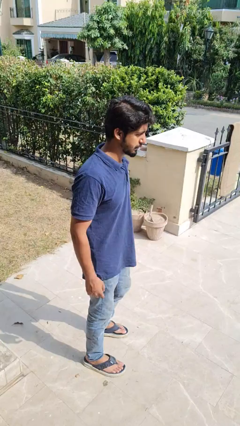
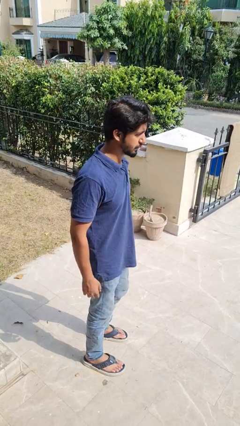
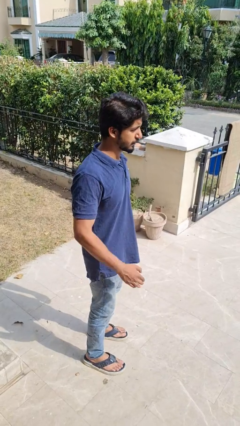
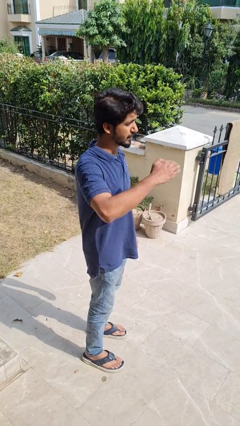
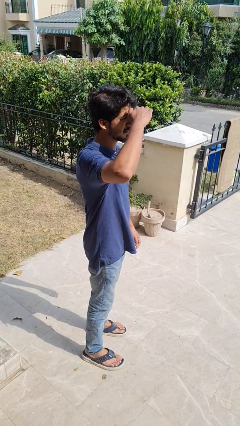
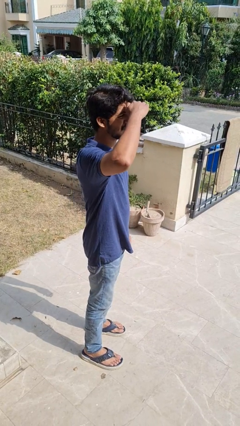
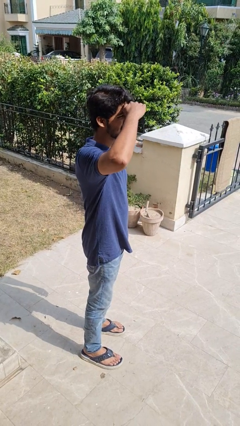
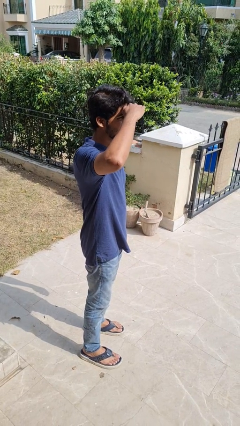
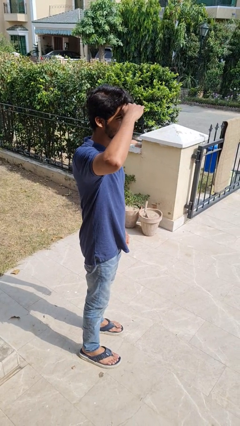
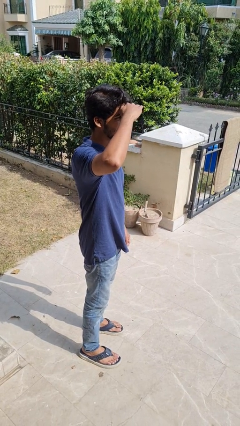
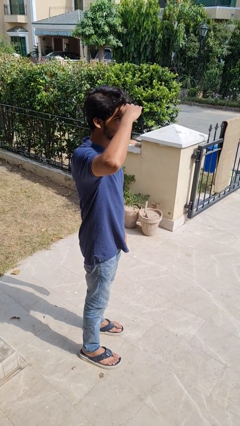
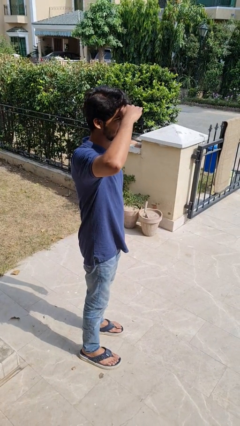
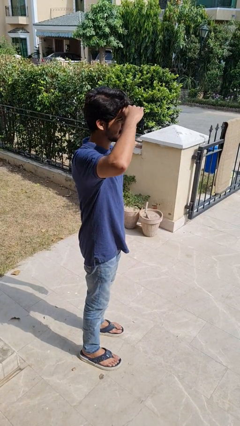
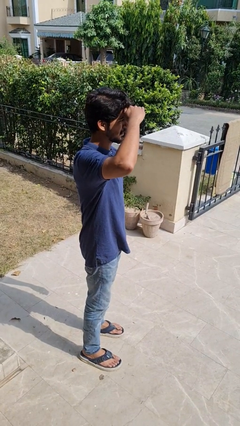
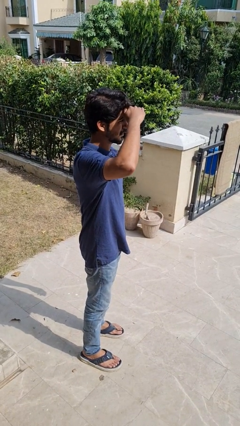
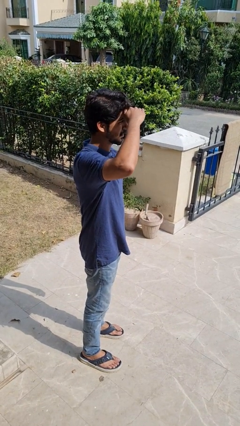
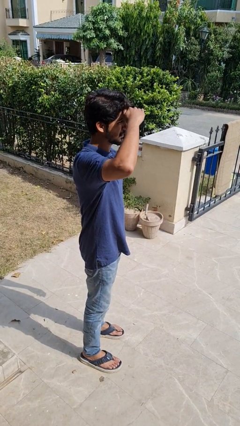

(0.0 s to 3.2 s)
person shades eyes

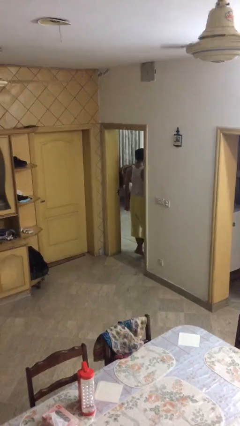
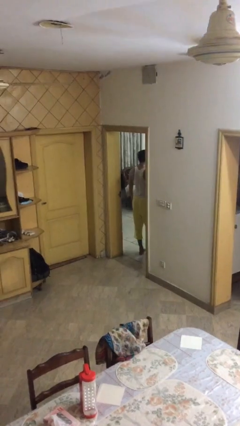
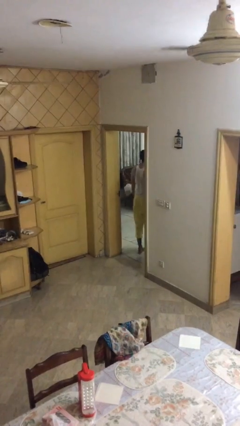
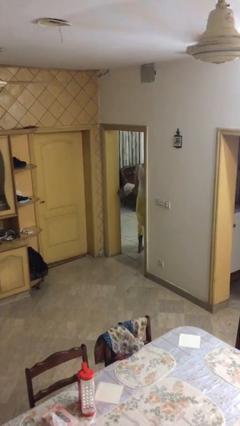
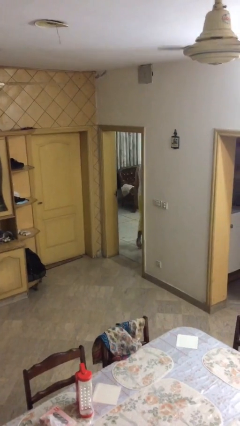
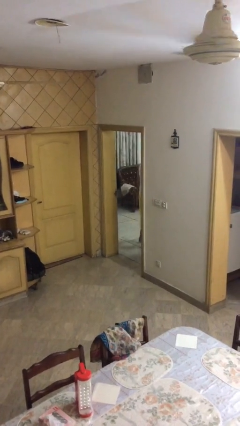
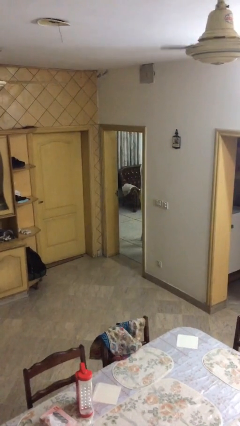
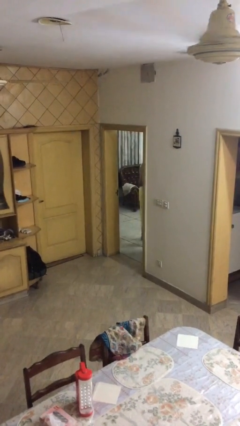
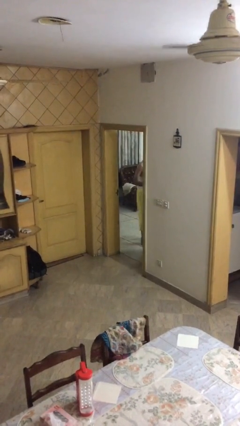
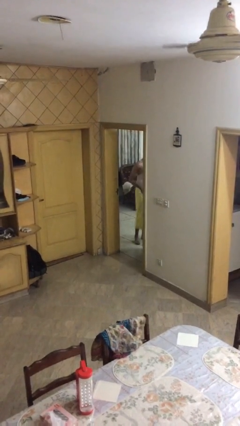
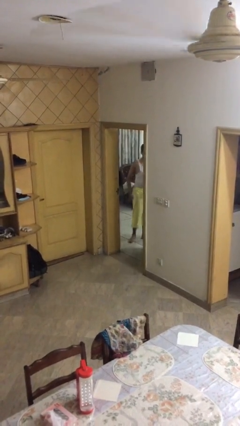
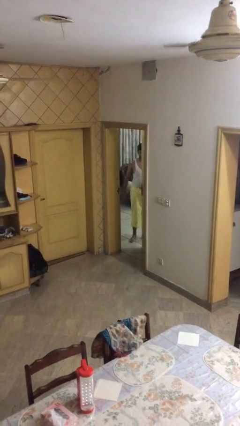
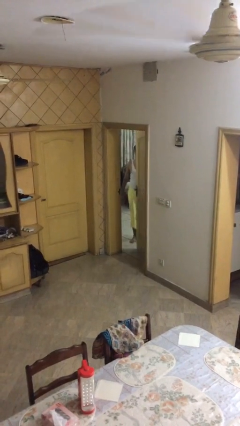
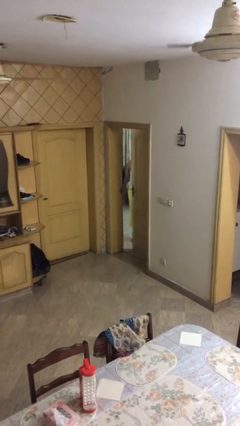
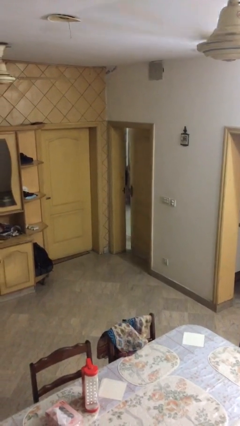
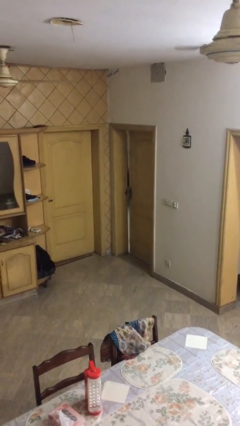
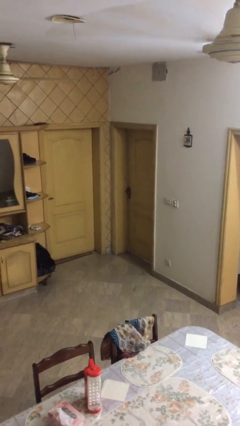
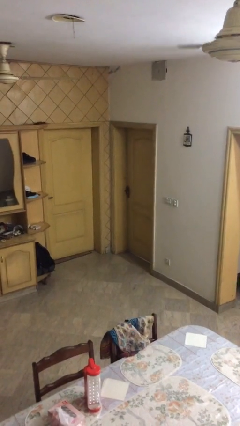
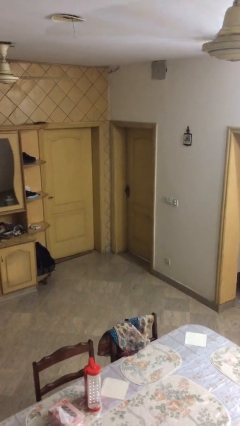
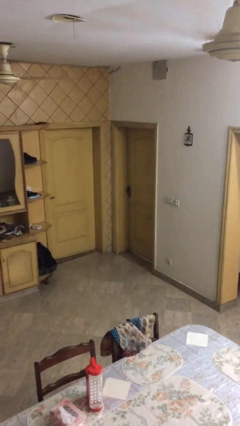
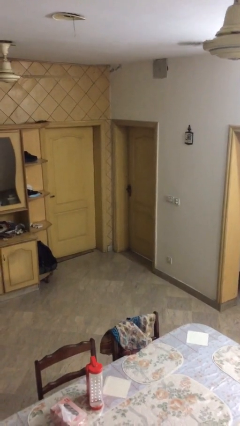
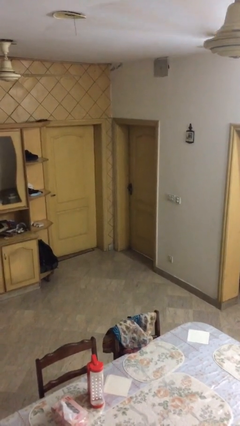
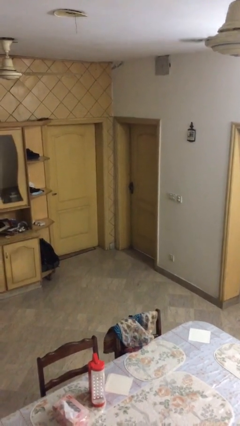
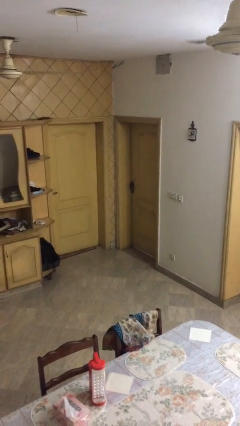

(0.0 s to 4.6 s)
person closes facility door

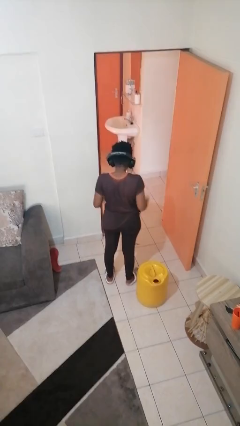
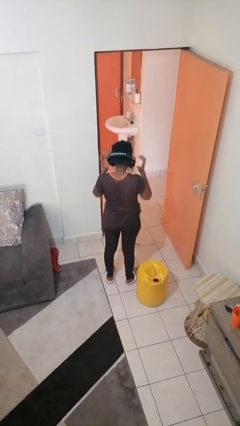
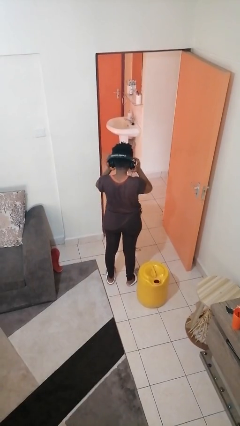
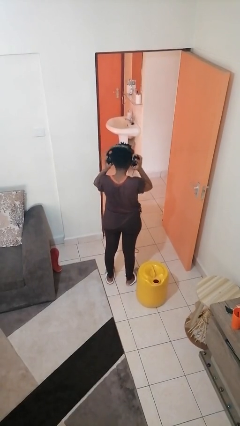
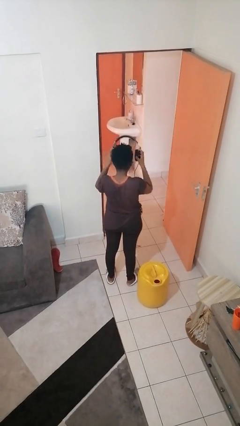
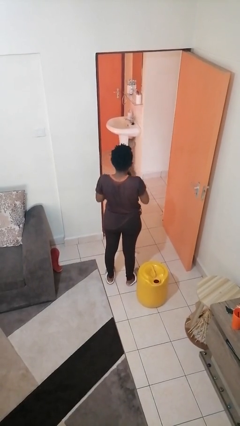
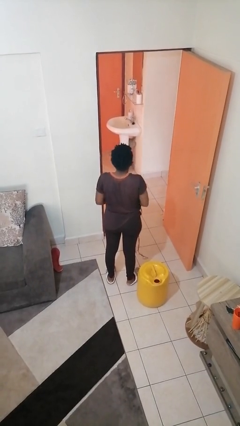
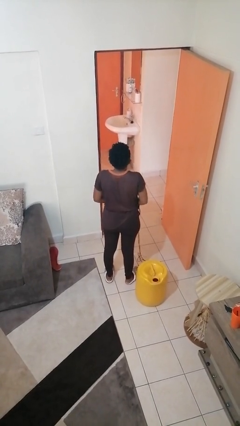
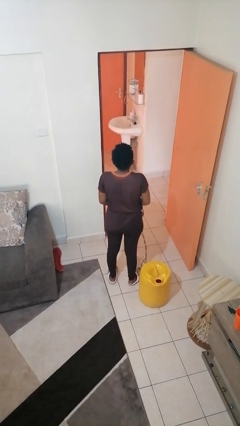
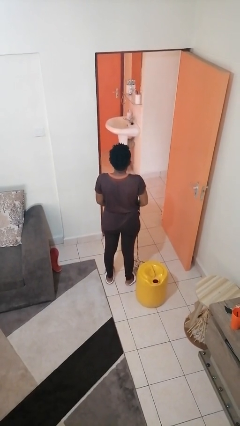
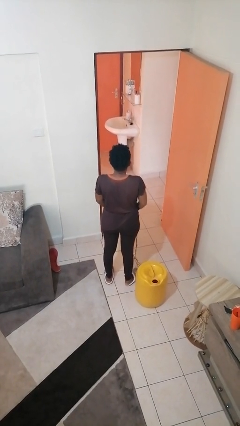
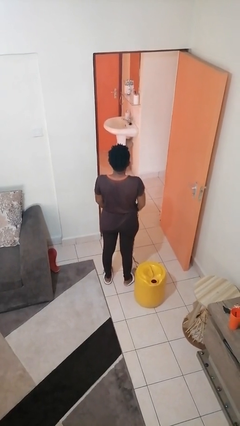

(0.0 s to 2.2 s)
person takes off headphones

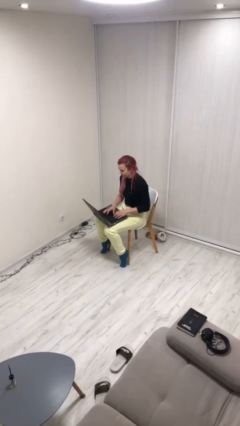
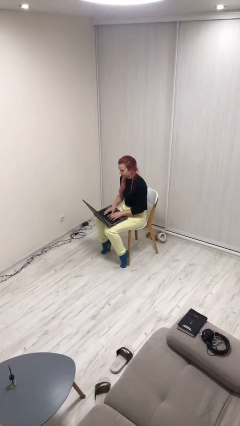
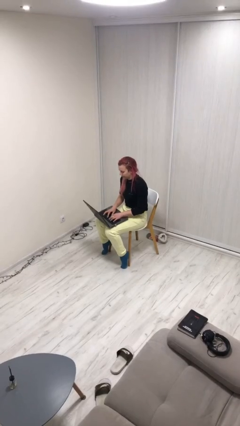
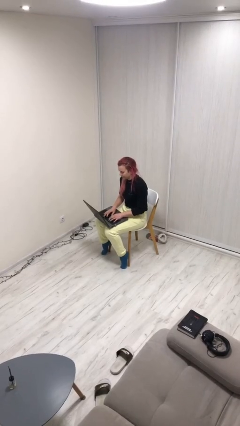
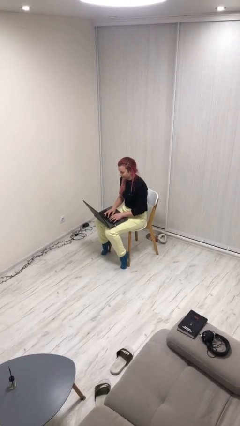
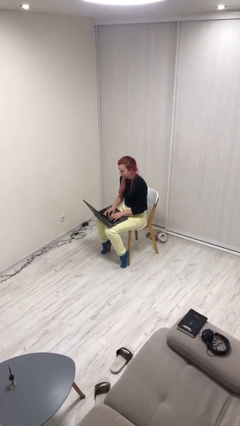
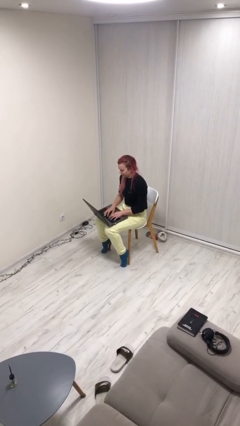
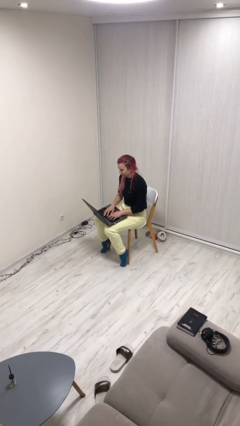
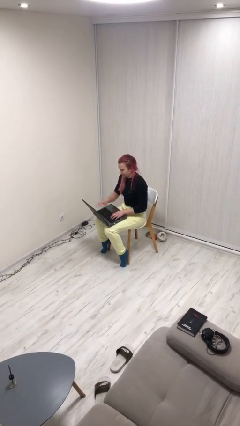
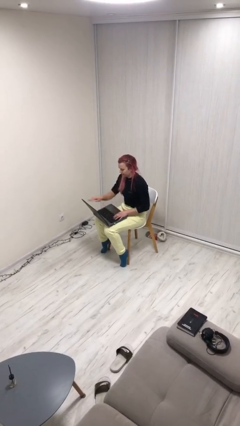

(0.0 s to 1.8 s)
person interacts with laptop

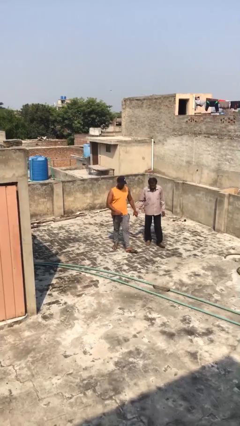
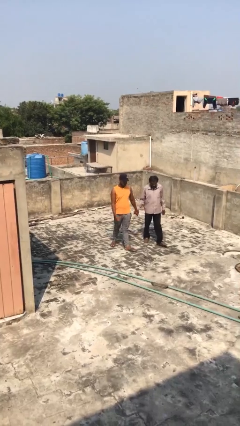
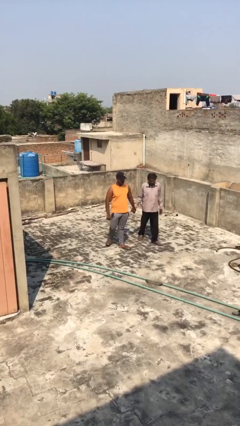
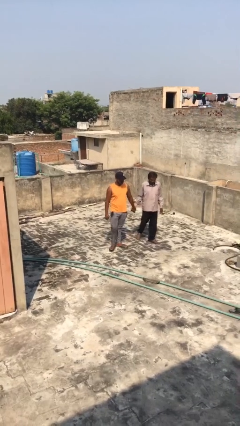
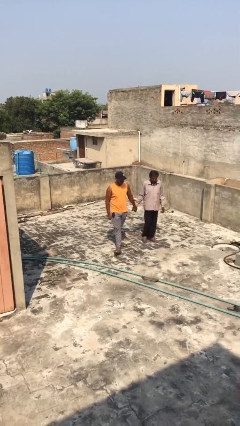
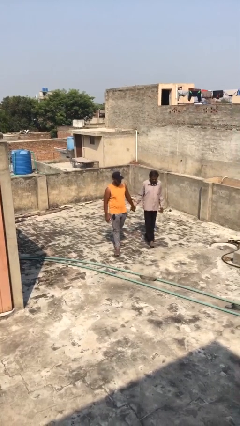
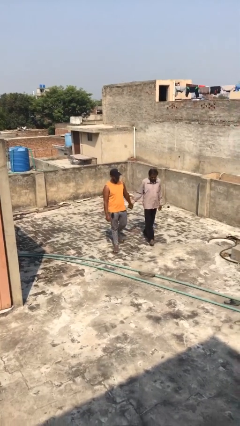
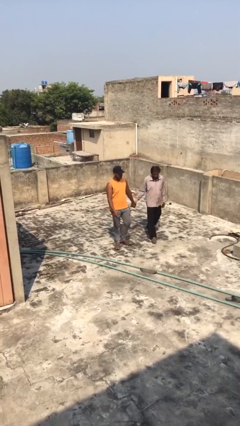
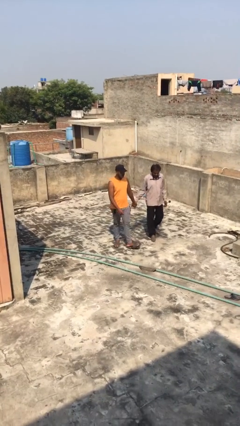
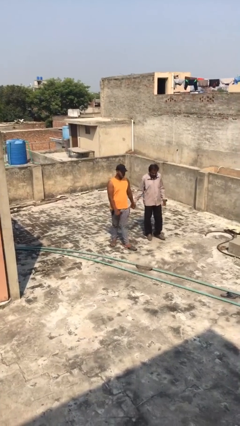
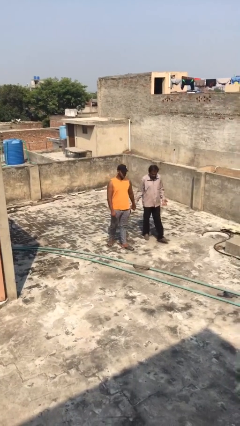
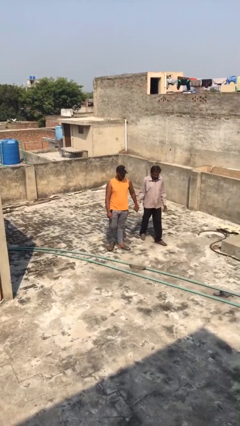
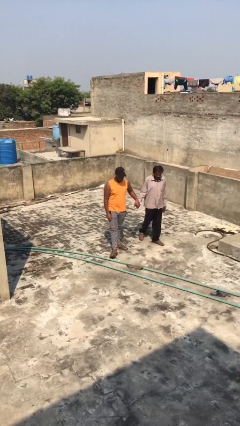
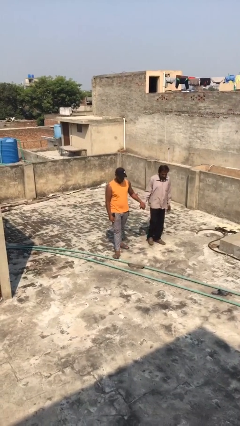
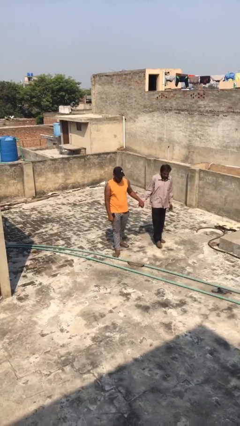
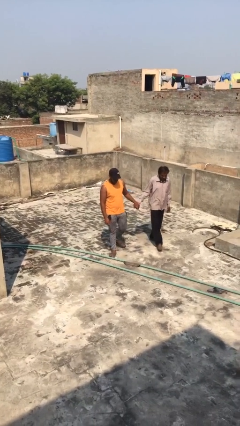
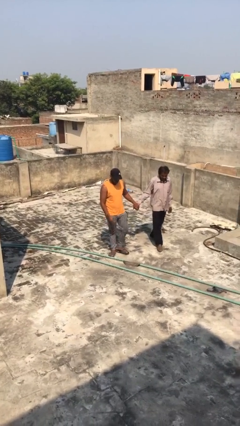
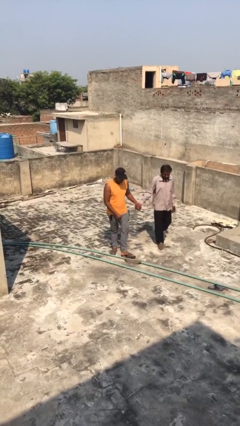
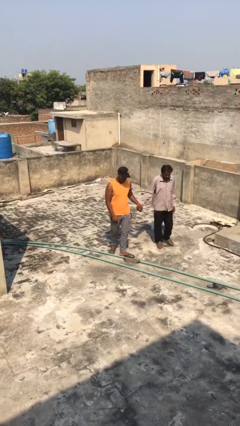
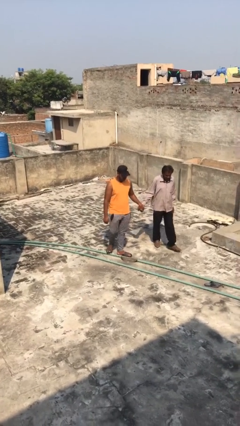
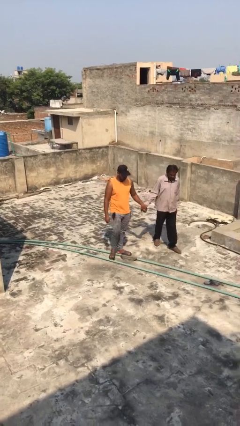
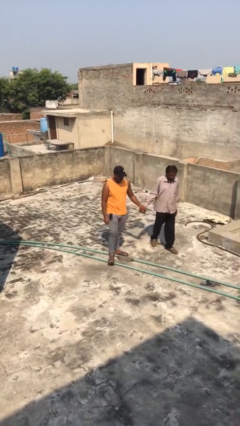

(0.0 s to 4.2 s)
person holds hand

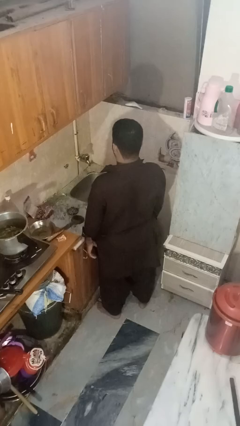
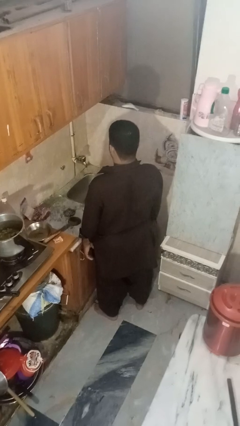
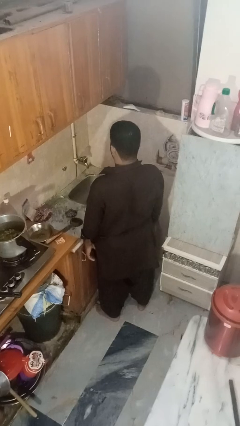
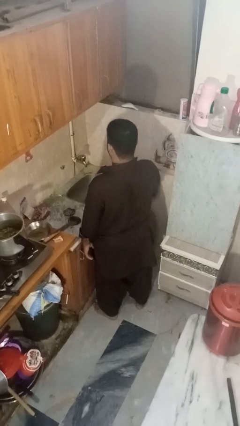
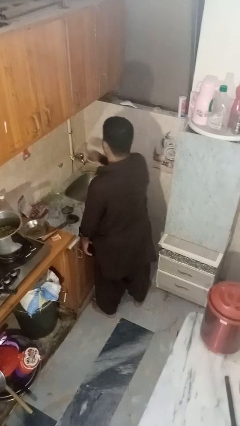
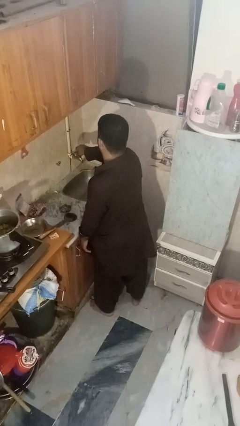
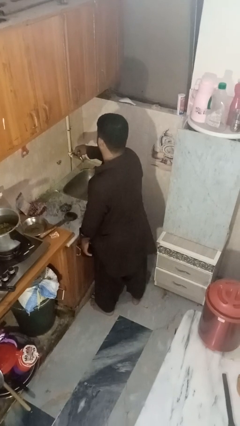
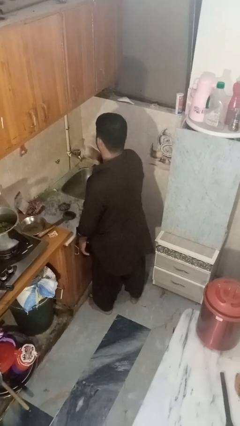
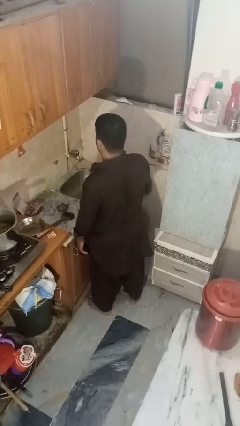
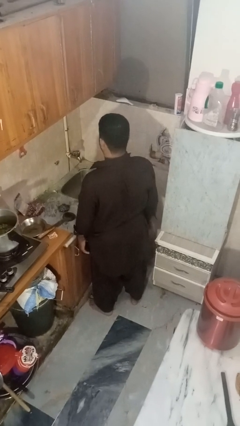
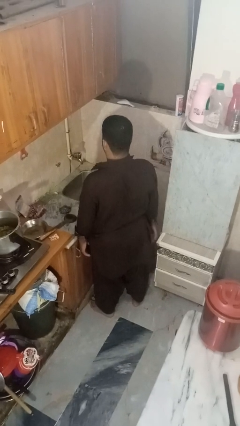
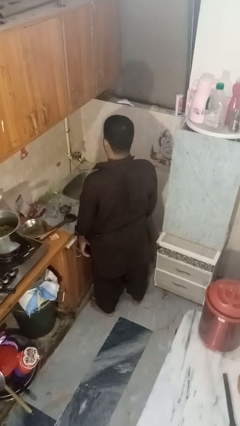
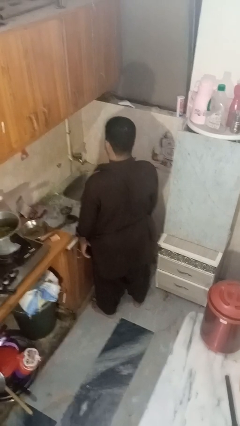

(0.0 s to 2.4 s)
person turns on faucet
